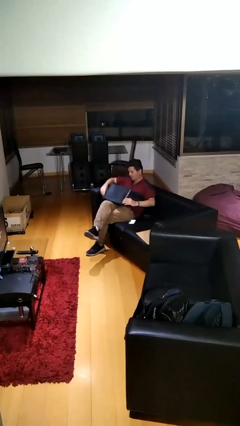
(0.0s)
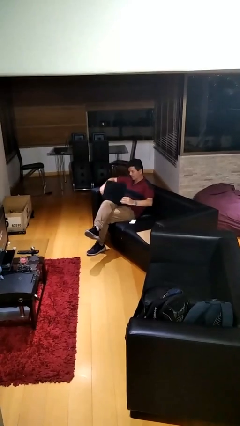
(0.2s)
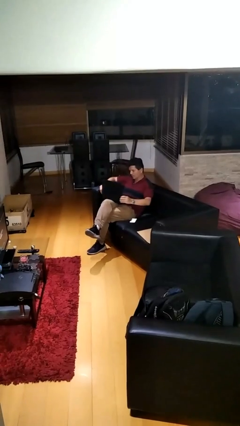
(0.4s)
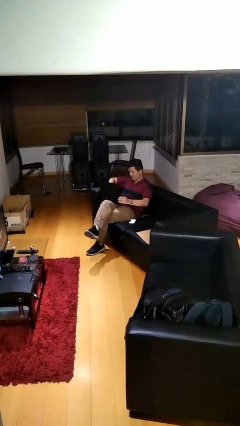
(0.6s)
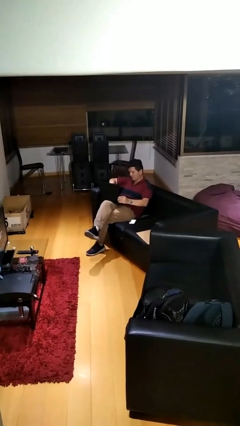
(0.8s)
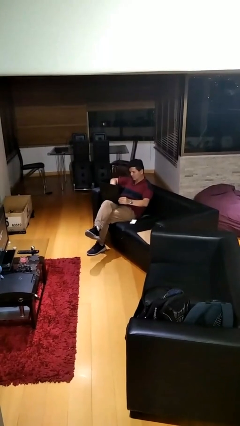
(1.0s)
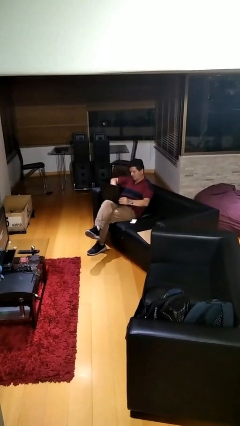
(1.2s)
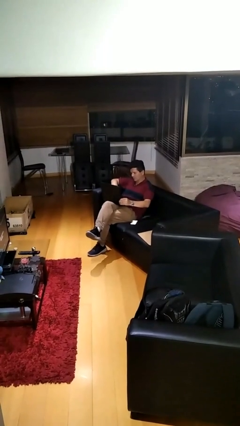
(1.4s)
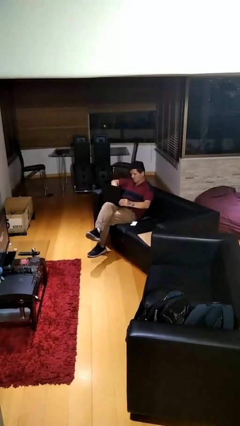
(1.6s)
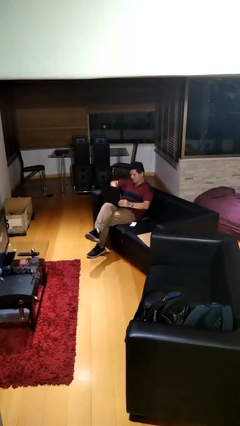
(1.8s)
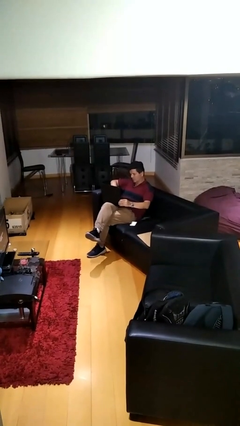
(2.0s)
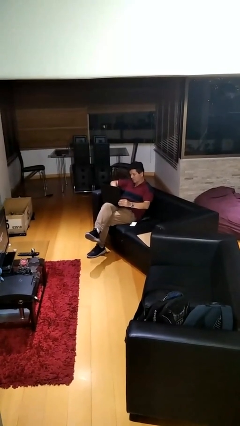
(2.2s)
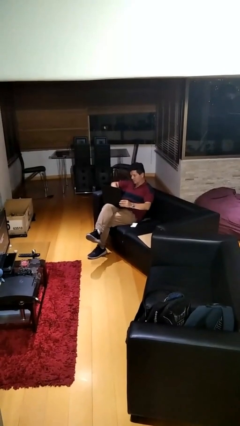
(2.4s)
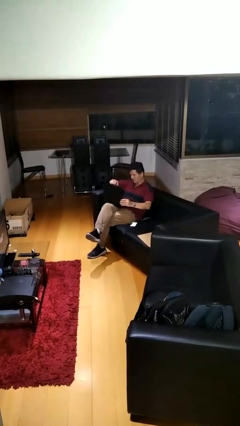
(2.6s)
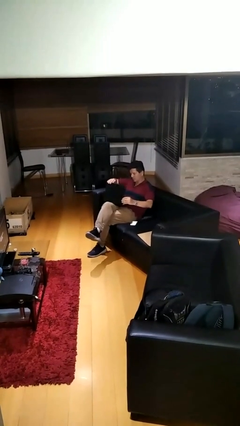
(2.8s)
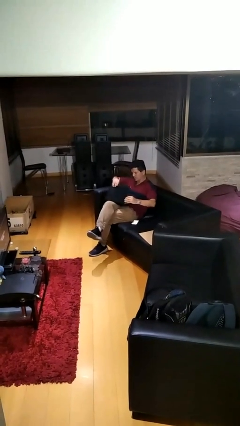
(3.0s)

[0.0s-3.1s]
person interacts with laptop

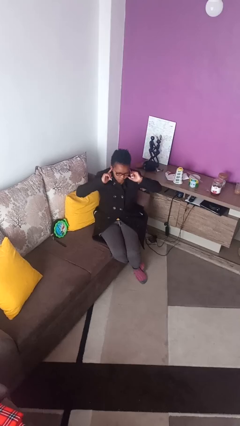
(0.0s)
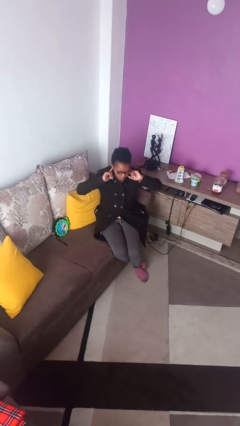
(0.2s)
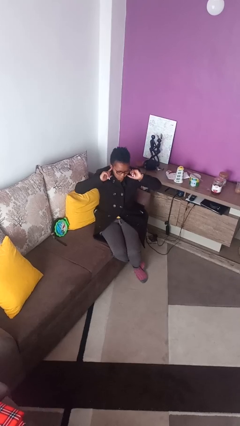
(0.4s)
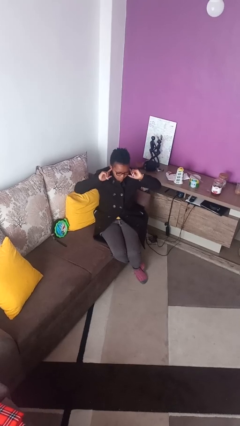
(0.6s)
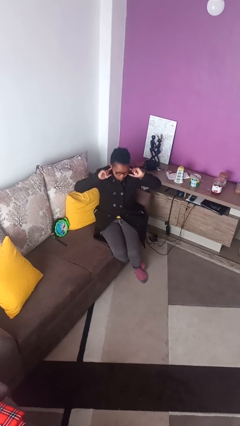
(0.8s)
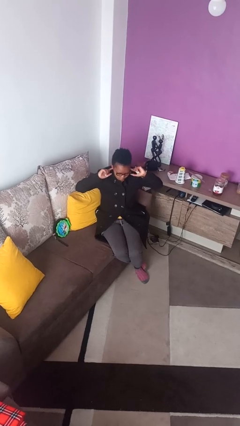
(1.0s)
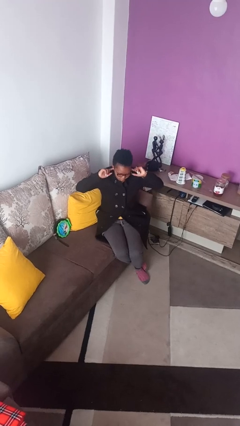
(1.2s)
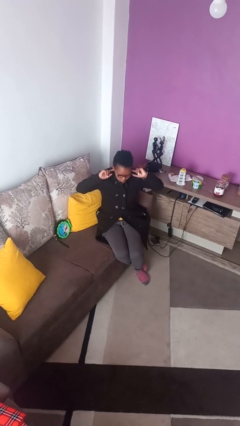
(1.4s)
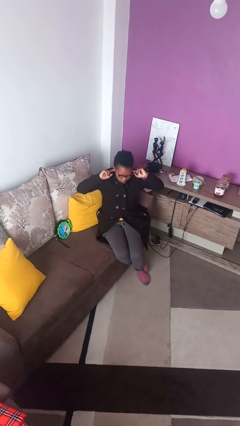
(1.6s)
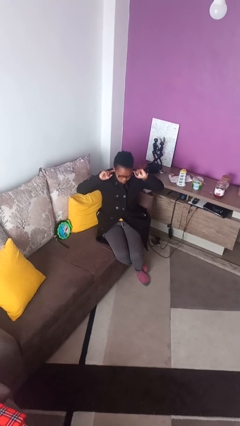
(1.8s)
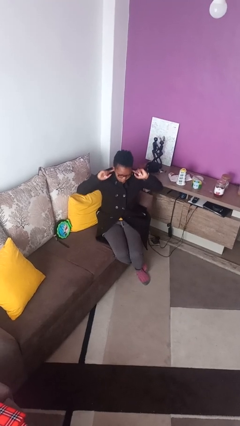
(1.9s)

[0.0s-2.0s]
person puts fingers in ear

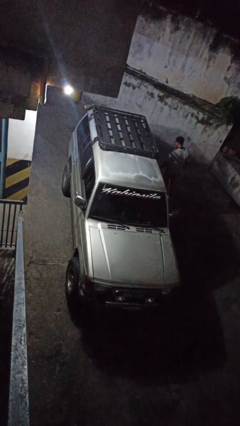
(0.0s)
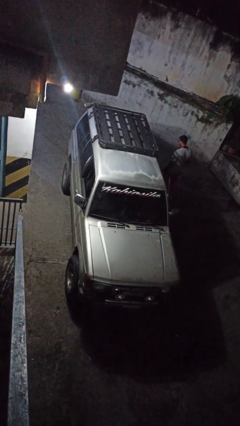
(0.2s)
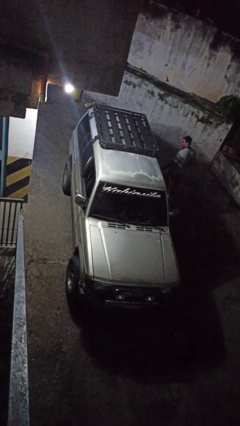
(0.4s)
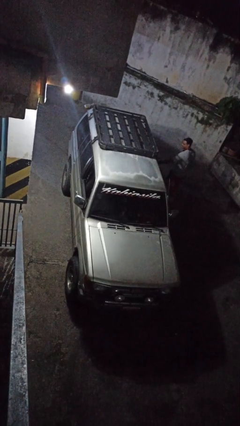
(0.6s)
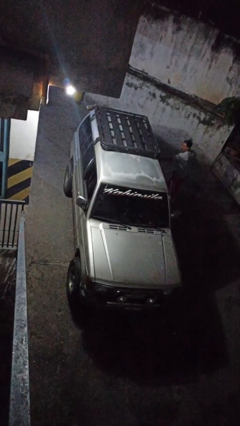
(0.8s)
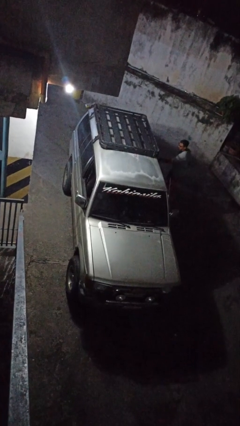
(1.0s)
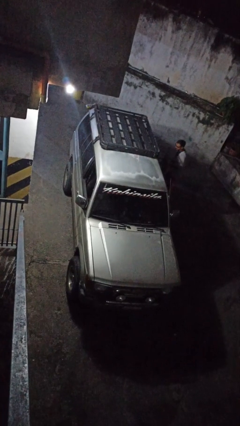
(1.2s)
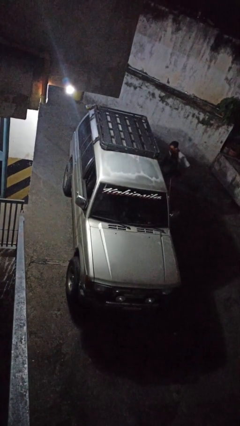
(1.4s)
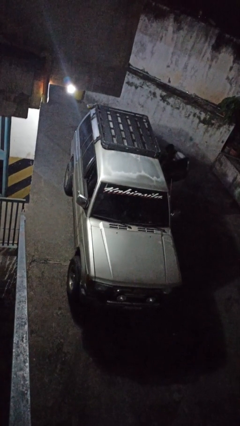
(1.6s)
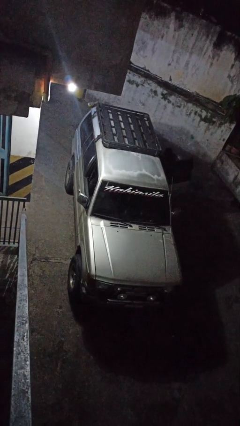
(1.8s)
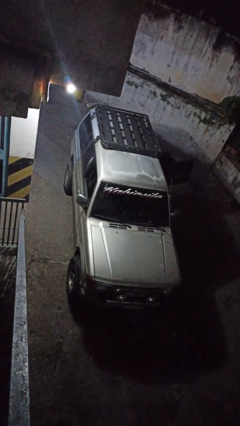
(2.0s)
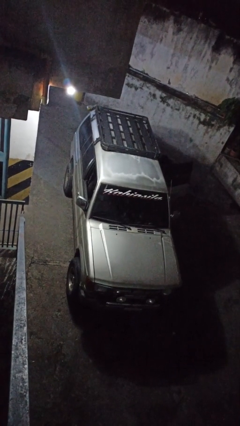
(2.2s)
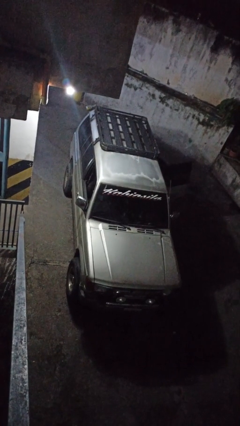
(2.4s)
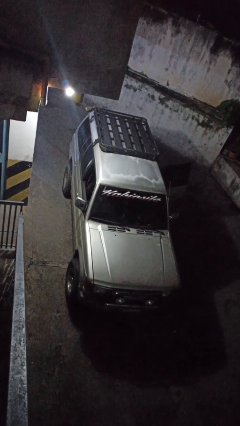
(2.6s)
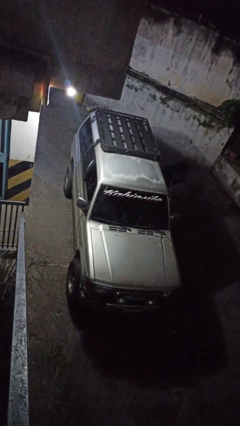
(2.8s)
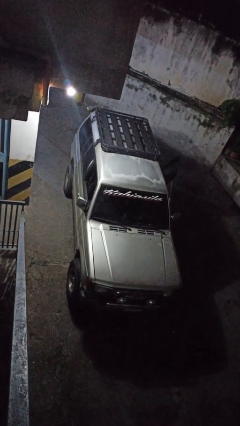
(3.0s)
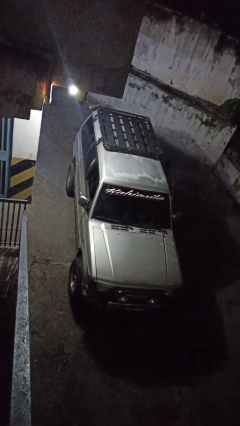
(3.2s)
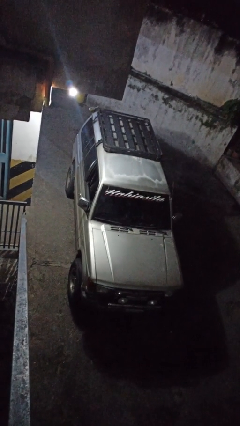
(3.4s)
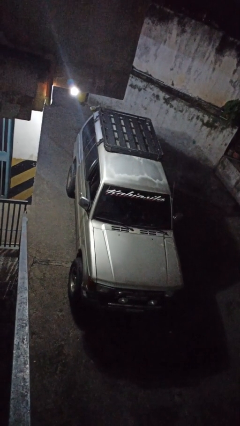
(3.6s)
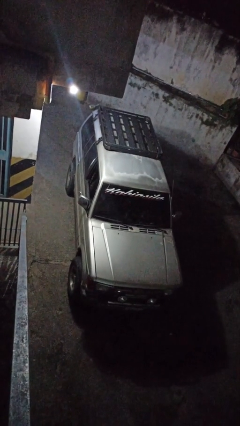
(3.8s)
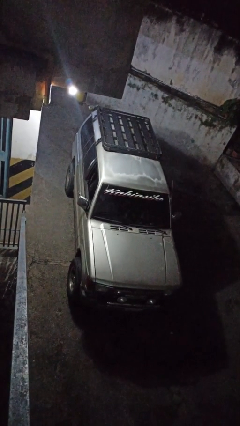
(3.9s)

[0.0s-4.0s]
car picks up person

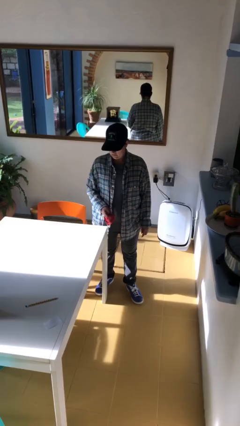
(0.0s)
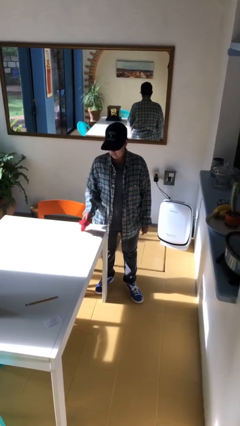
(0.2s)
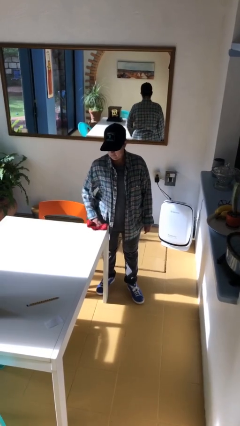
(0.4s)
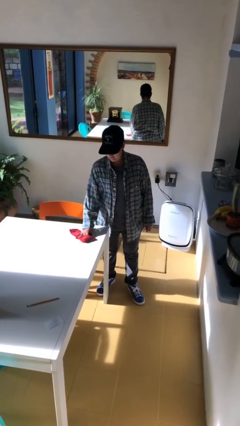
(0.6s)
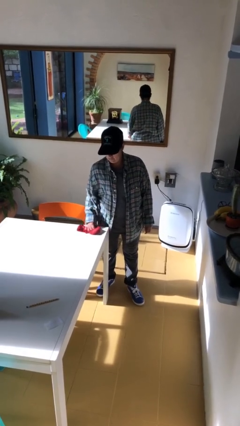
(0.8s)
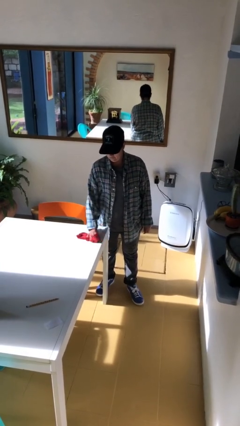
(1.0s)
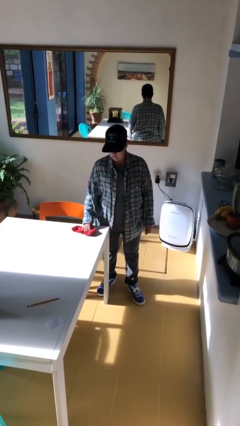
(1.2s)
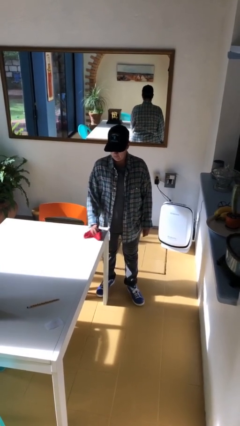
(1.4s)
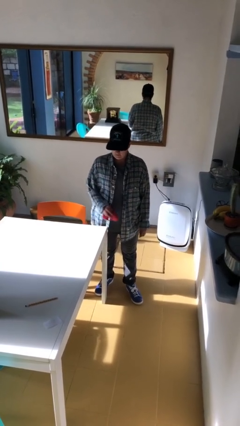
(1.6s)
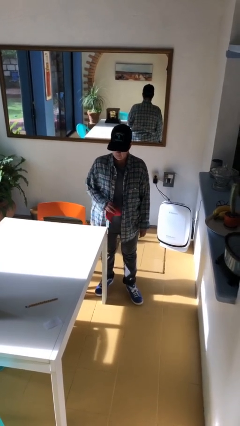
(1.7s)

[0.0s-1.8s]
person cleans table with rag

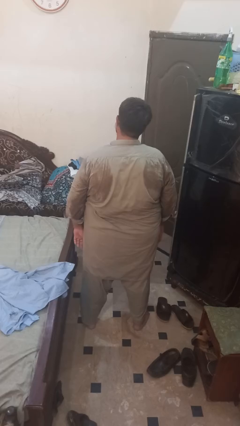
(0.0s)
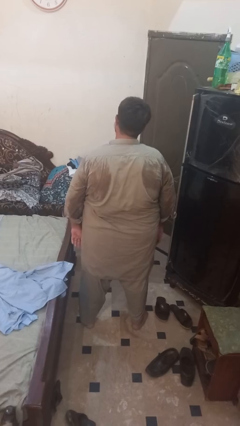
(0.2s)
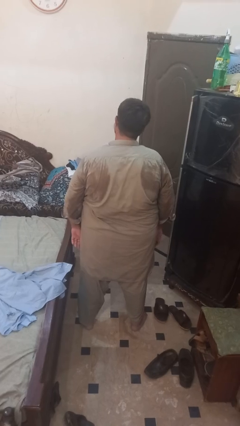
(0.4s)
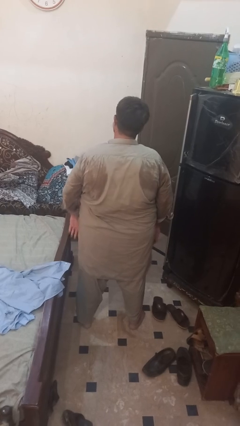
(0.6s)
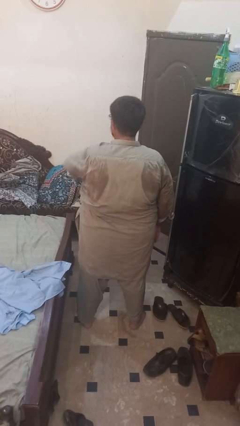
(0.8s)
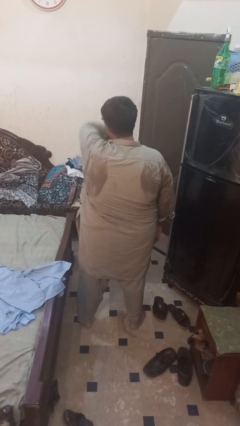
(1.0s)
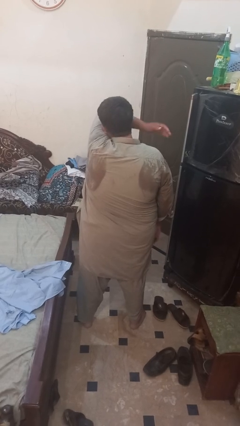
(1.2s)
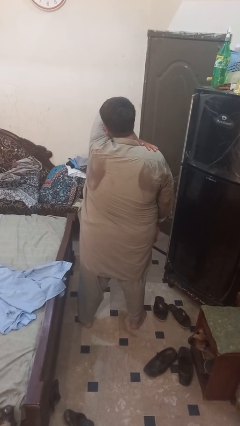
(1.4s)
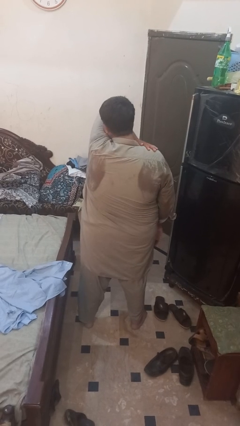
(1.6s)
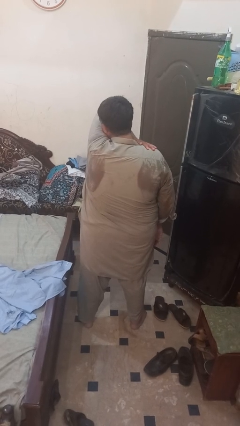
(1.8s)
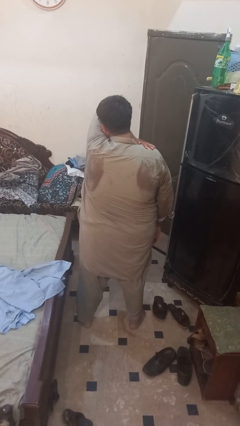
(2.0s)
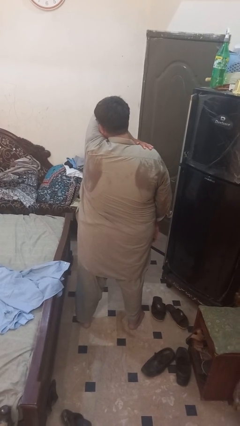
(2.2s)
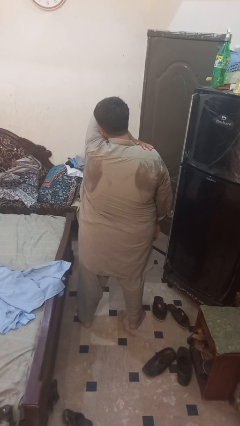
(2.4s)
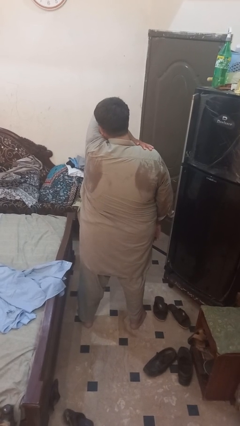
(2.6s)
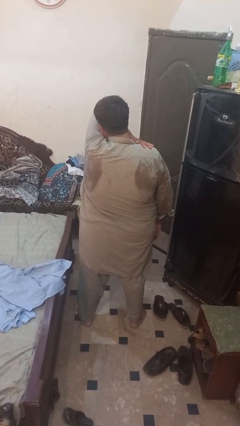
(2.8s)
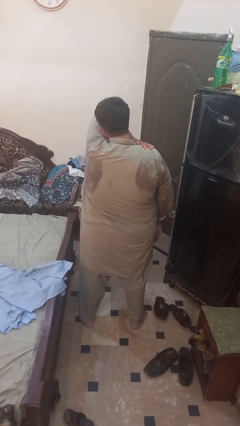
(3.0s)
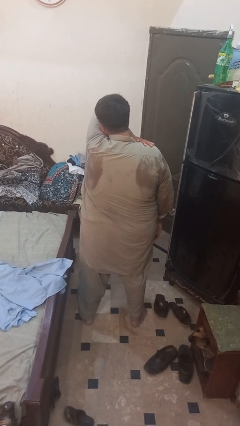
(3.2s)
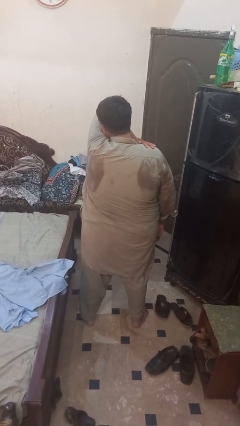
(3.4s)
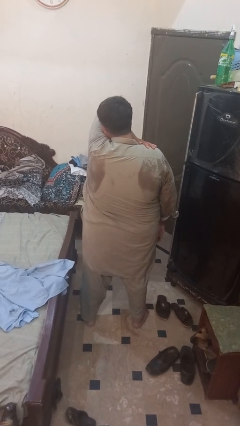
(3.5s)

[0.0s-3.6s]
person sneezes into arm

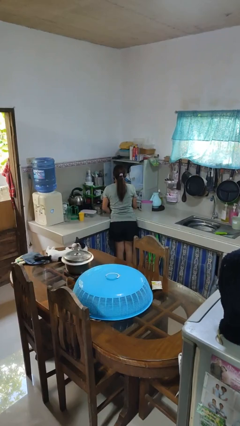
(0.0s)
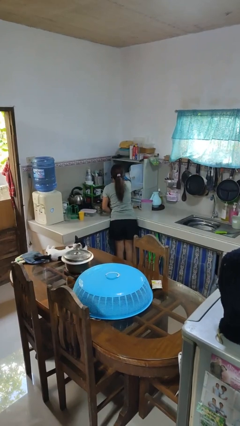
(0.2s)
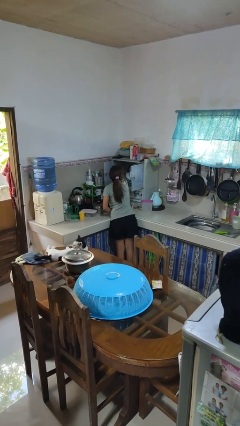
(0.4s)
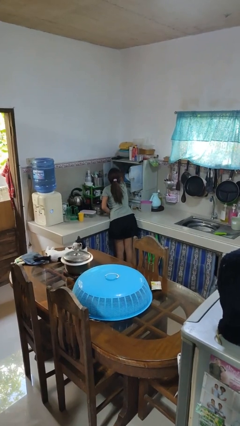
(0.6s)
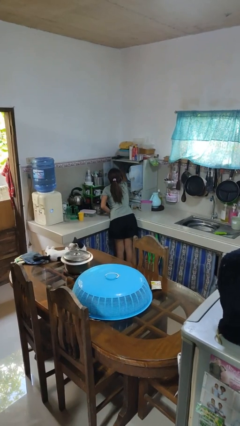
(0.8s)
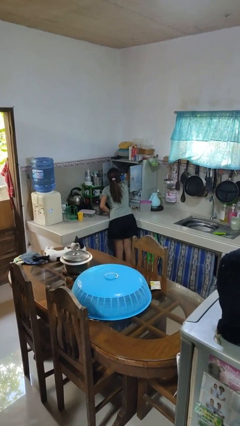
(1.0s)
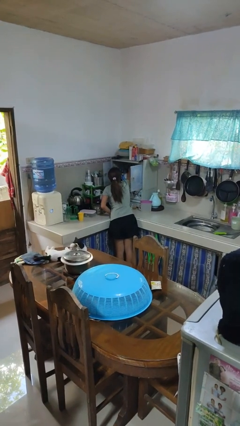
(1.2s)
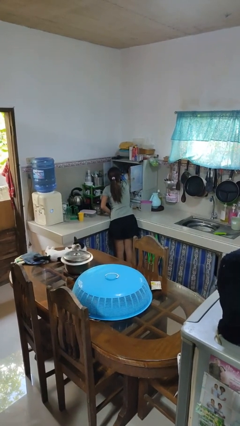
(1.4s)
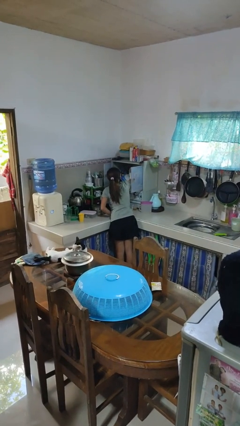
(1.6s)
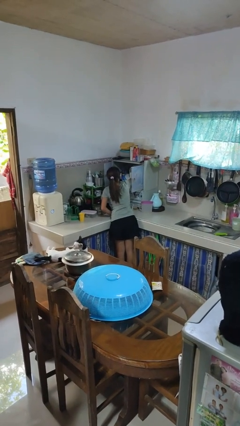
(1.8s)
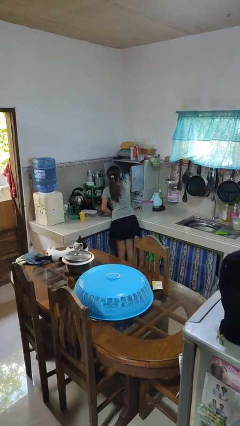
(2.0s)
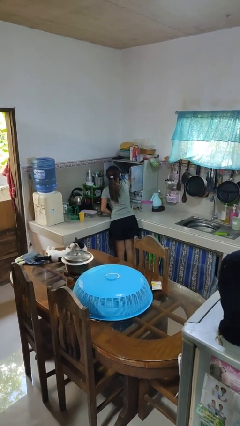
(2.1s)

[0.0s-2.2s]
person searches in kitchen drawer

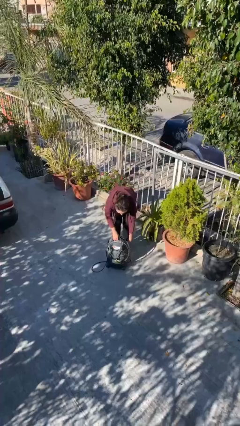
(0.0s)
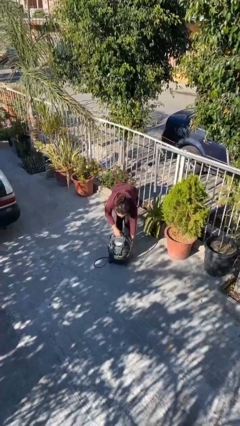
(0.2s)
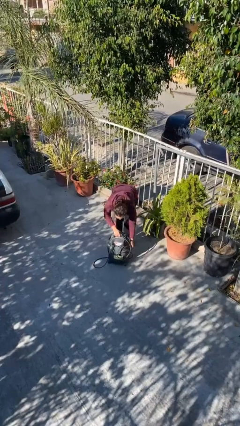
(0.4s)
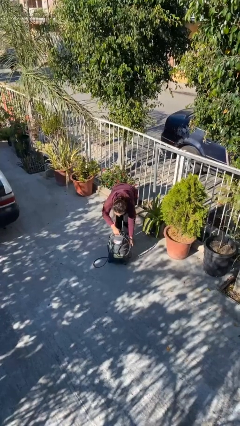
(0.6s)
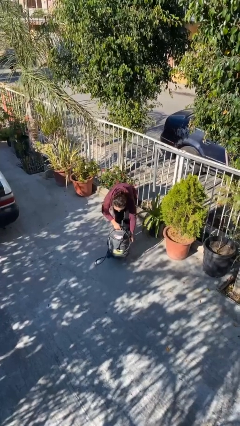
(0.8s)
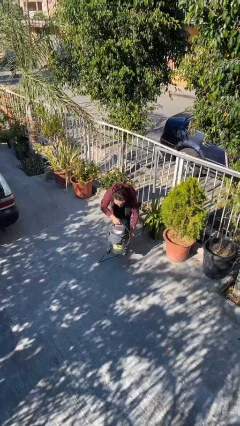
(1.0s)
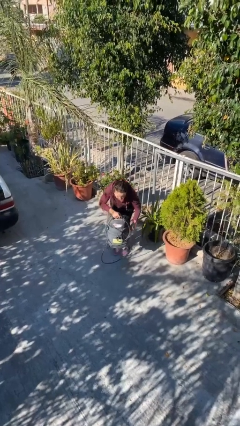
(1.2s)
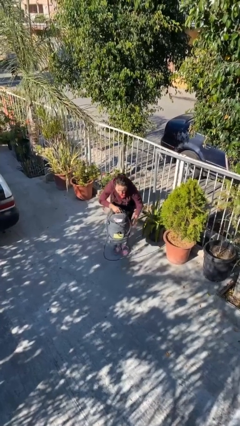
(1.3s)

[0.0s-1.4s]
person picks up object from floor
